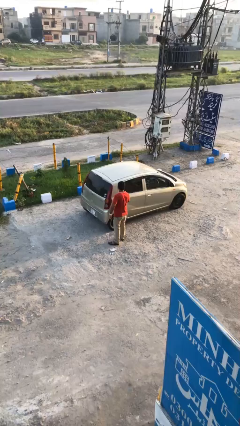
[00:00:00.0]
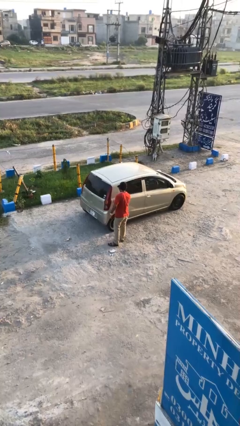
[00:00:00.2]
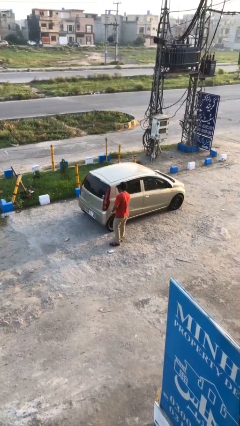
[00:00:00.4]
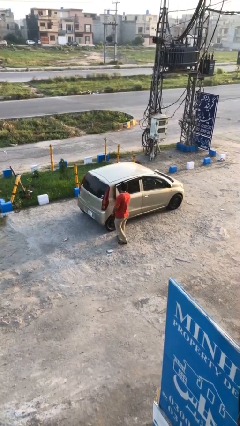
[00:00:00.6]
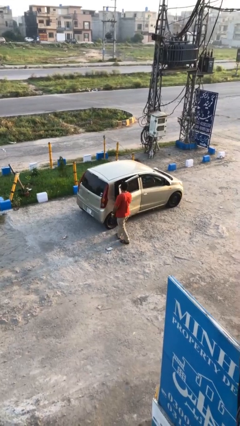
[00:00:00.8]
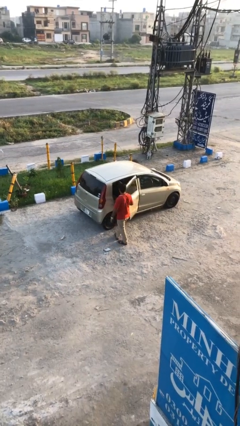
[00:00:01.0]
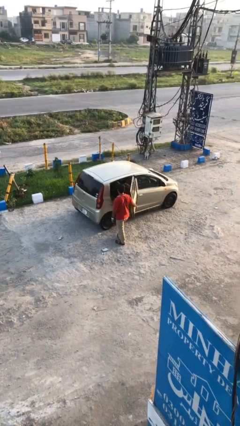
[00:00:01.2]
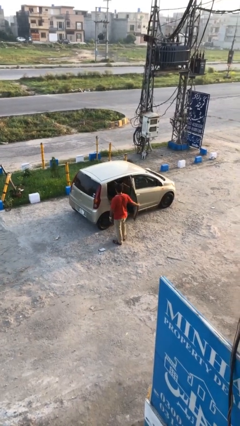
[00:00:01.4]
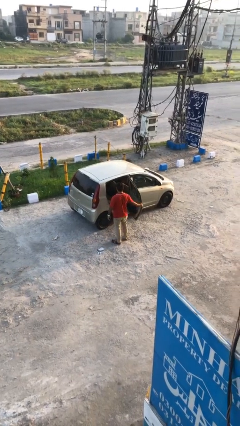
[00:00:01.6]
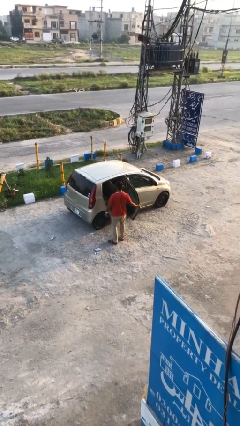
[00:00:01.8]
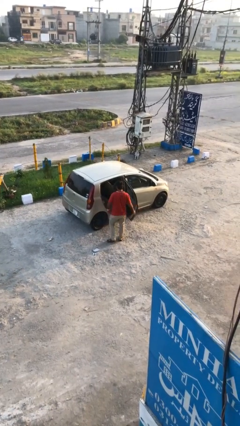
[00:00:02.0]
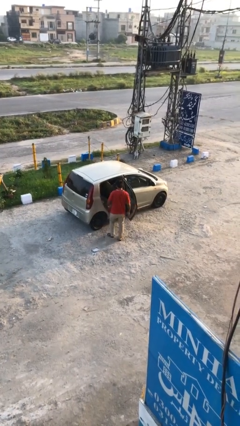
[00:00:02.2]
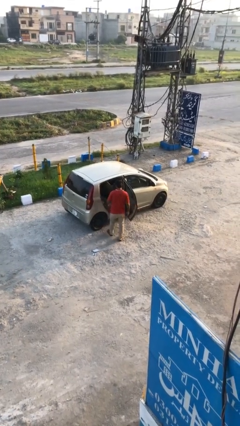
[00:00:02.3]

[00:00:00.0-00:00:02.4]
person opens car door

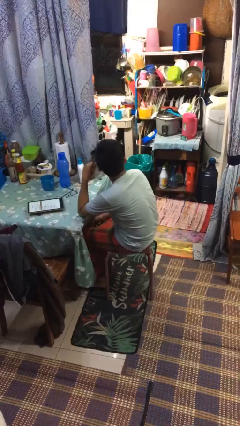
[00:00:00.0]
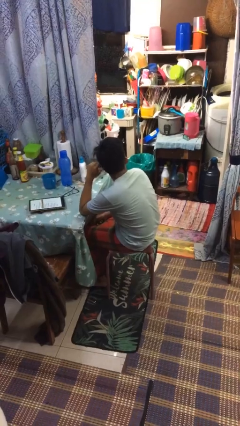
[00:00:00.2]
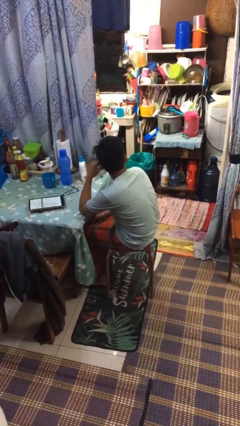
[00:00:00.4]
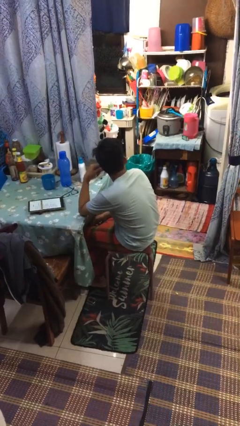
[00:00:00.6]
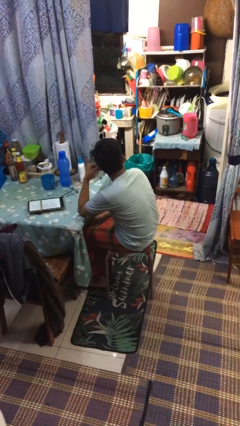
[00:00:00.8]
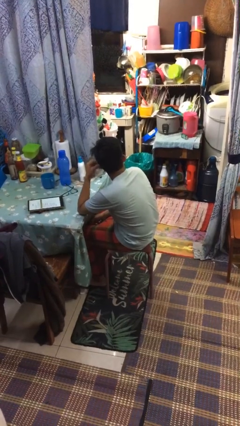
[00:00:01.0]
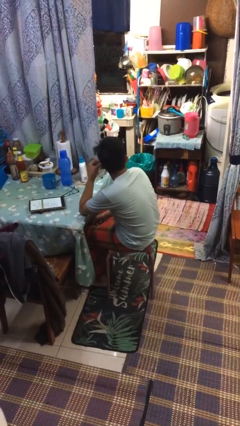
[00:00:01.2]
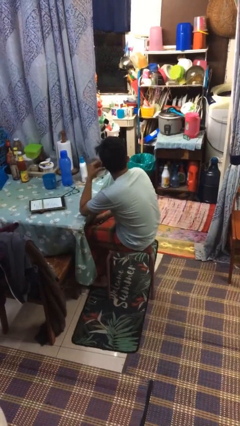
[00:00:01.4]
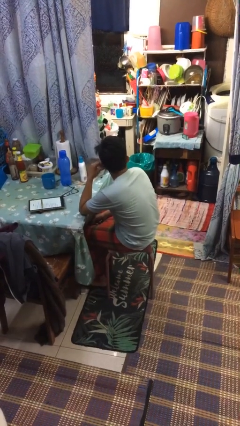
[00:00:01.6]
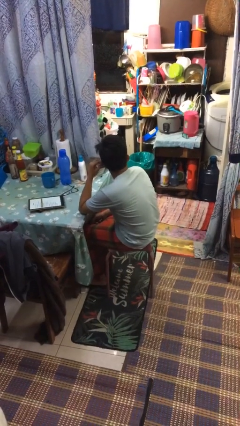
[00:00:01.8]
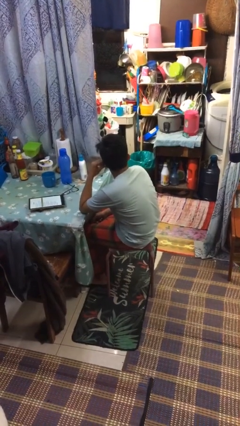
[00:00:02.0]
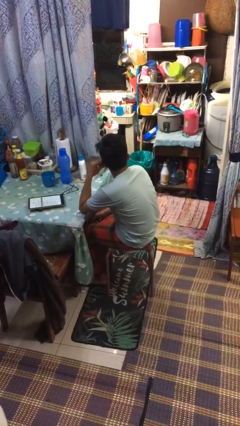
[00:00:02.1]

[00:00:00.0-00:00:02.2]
person touches earlobe

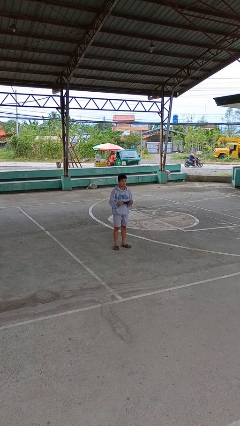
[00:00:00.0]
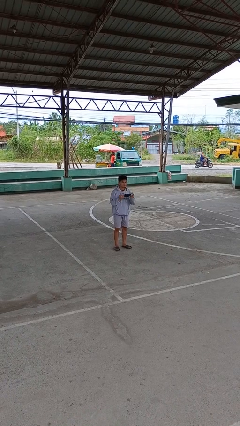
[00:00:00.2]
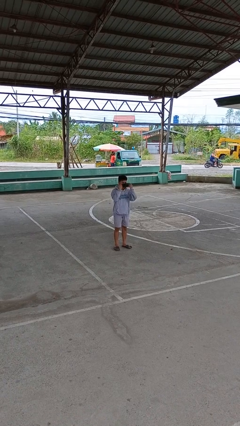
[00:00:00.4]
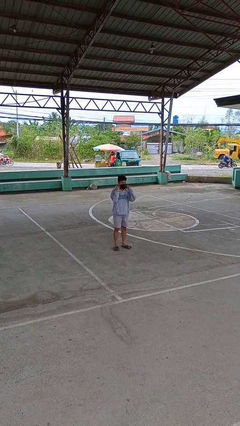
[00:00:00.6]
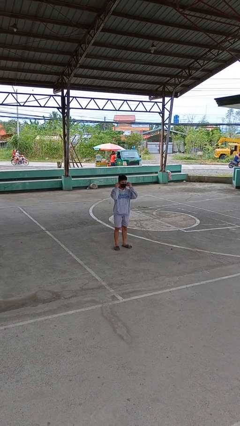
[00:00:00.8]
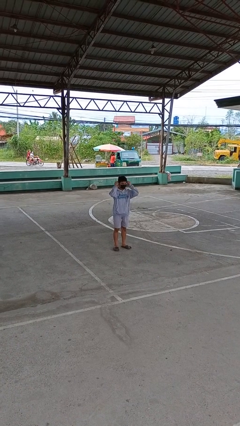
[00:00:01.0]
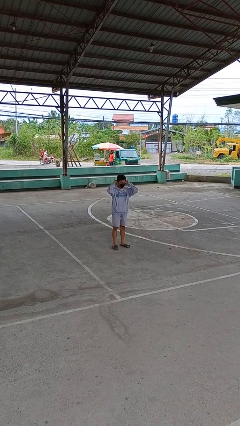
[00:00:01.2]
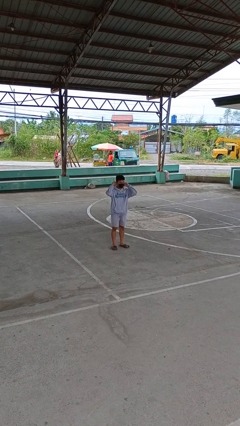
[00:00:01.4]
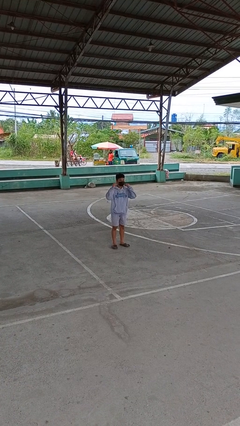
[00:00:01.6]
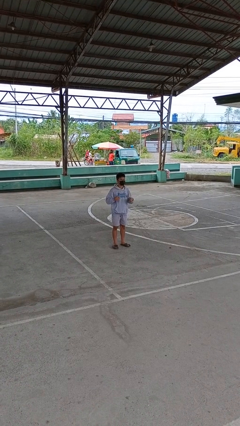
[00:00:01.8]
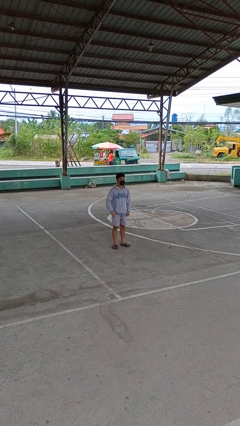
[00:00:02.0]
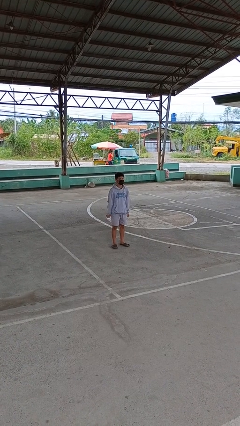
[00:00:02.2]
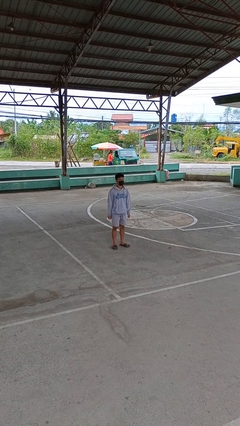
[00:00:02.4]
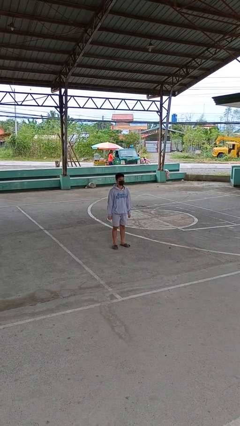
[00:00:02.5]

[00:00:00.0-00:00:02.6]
person puts on facemask

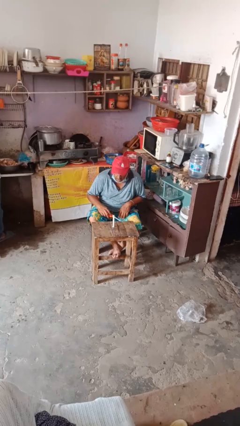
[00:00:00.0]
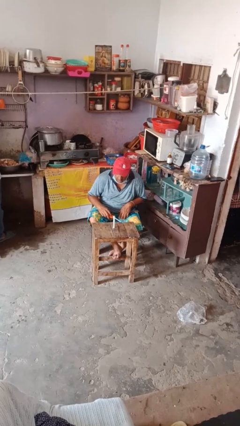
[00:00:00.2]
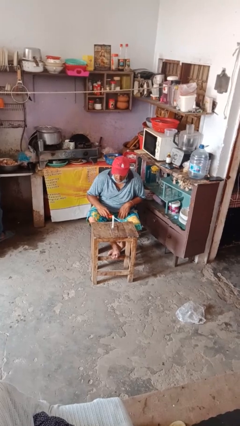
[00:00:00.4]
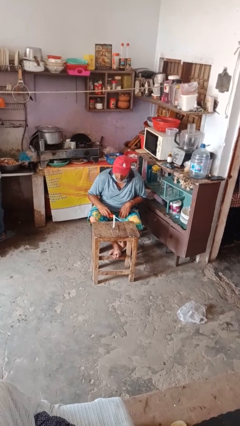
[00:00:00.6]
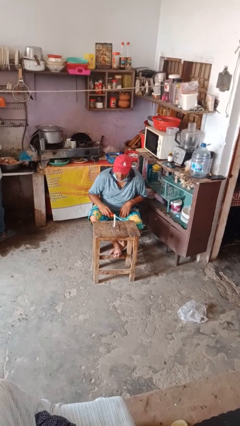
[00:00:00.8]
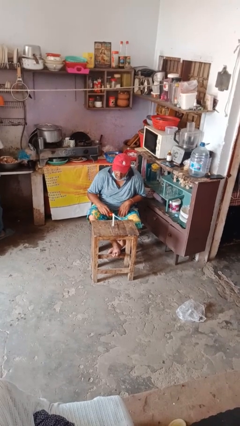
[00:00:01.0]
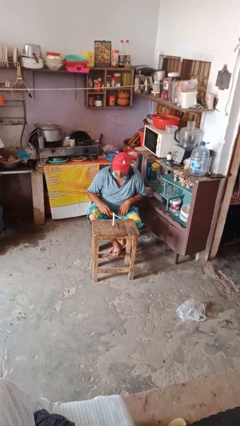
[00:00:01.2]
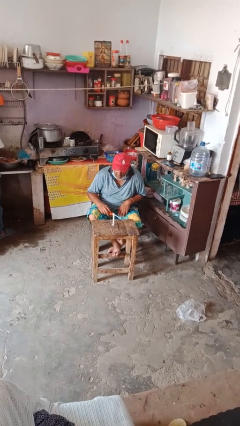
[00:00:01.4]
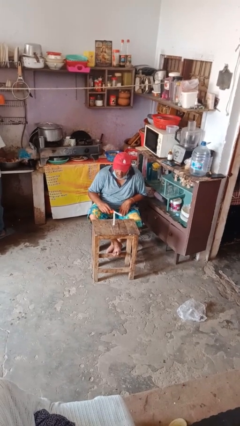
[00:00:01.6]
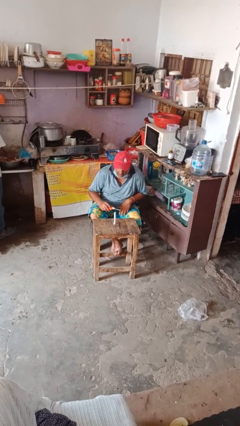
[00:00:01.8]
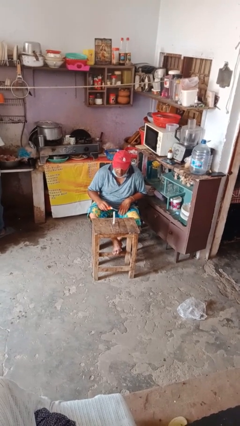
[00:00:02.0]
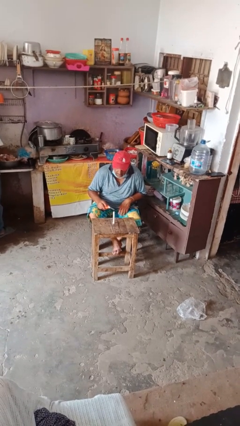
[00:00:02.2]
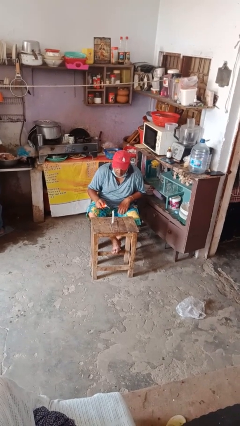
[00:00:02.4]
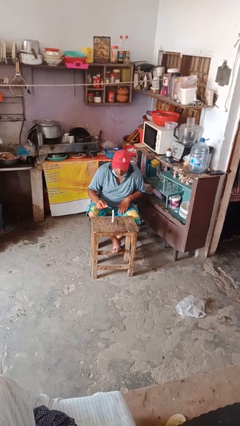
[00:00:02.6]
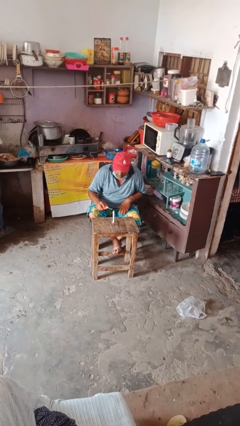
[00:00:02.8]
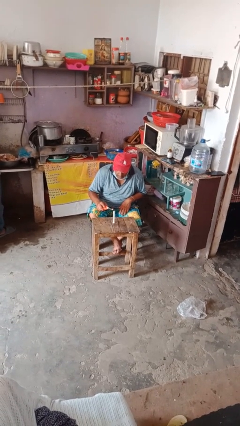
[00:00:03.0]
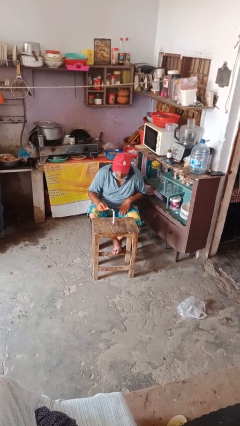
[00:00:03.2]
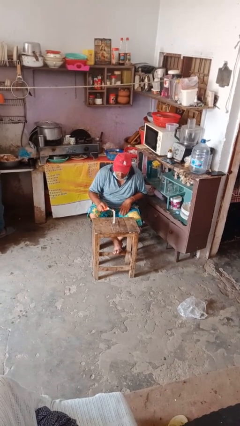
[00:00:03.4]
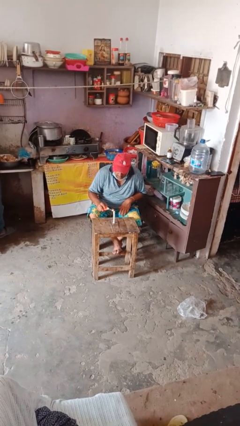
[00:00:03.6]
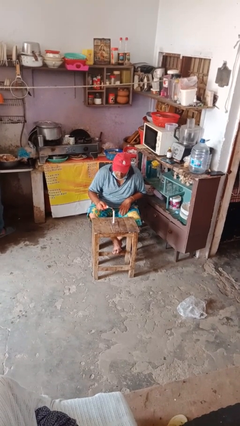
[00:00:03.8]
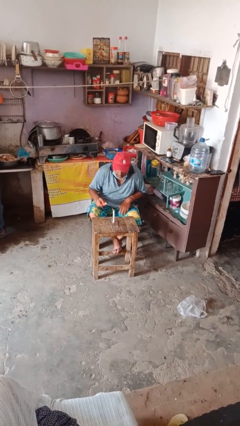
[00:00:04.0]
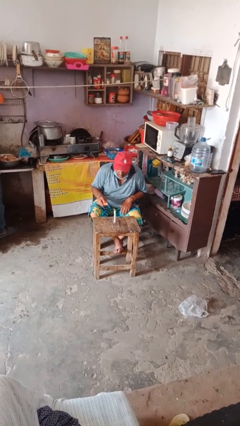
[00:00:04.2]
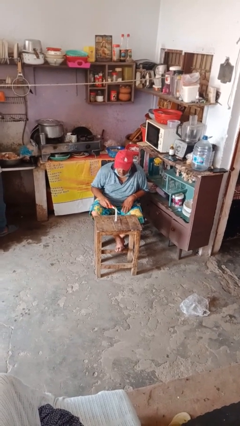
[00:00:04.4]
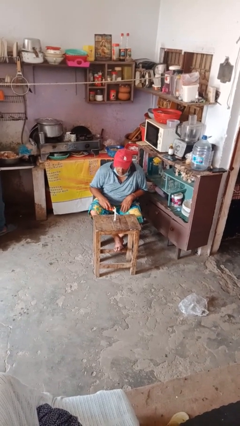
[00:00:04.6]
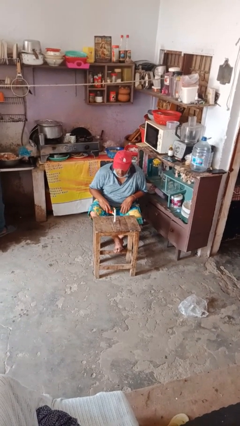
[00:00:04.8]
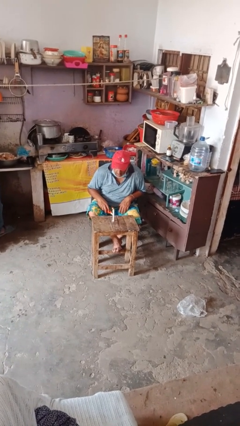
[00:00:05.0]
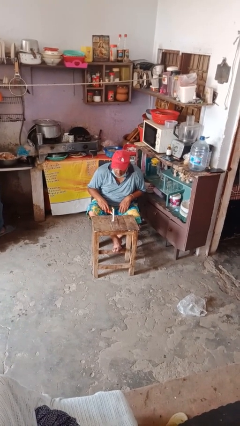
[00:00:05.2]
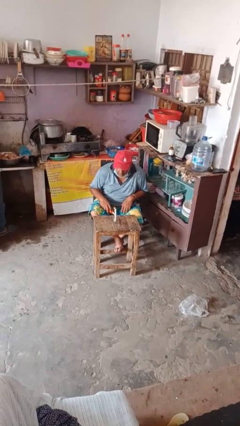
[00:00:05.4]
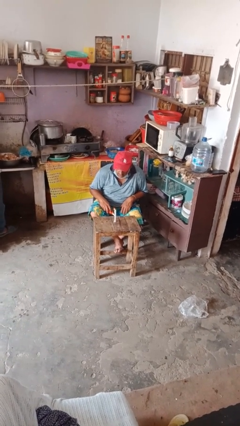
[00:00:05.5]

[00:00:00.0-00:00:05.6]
person lights candle

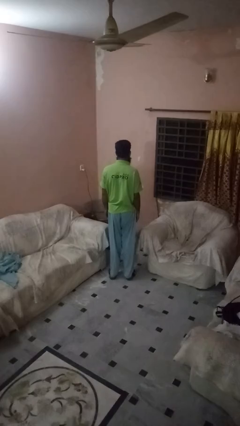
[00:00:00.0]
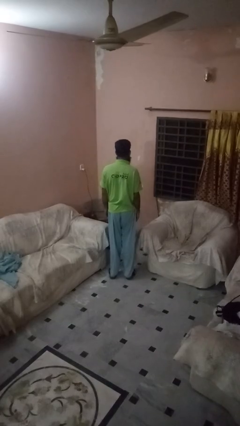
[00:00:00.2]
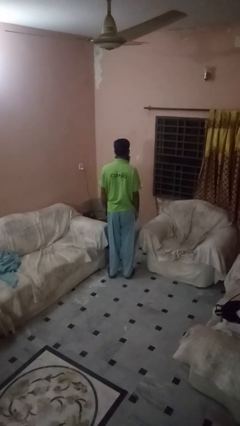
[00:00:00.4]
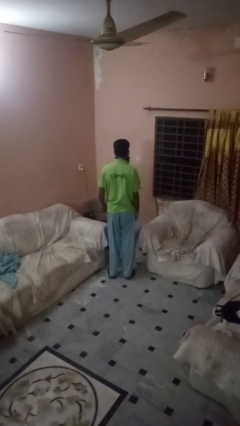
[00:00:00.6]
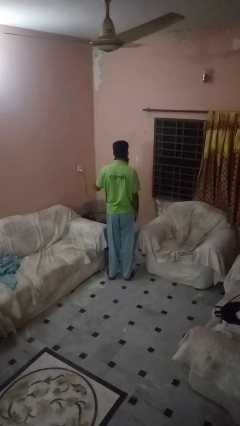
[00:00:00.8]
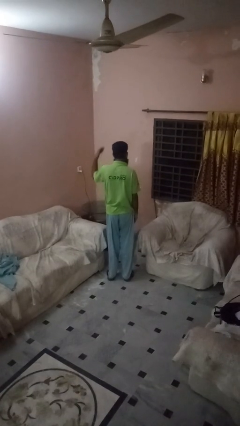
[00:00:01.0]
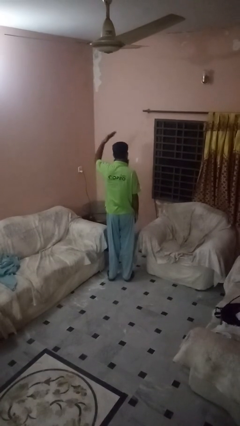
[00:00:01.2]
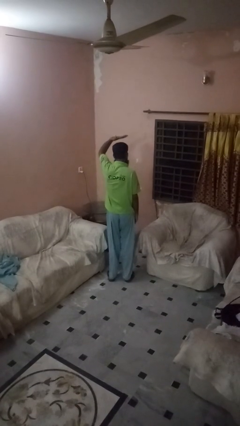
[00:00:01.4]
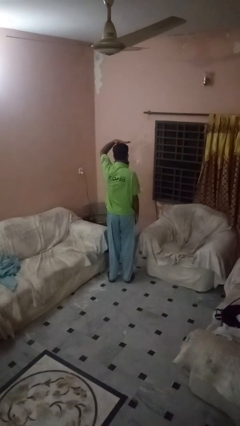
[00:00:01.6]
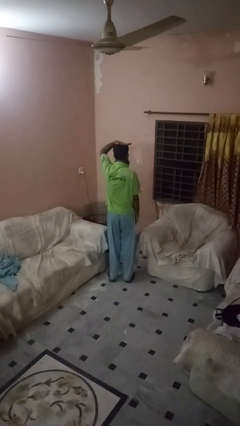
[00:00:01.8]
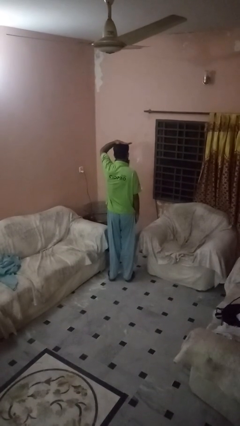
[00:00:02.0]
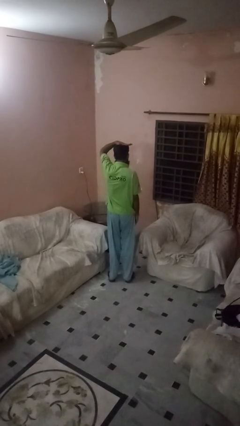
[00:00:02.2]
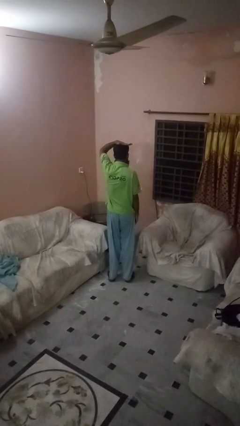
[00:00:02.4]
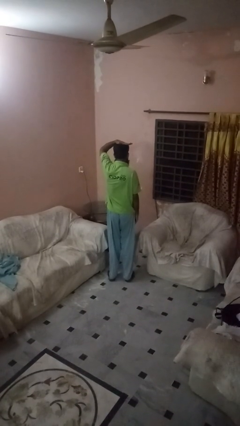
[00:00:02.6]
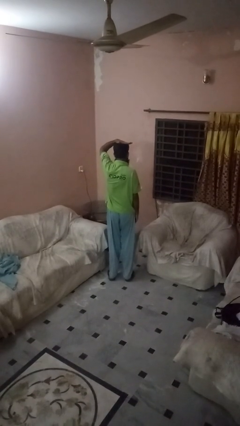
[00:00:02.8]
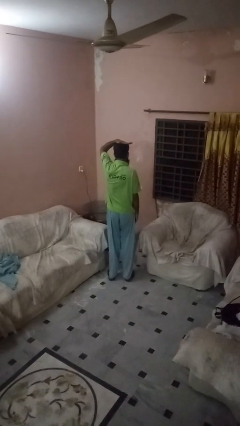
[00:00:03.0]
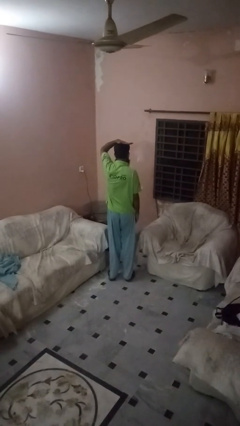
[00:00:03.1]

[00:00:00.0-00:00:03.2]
person pats head

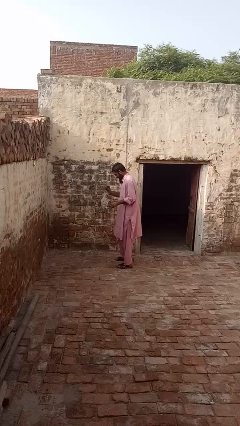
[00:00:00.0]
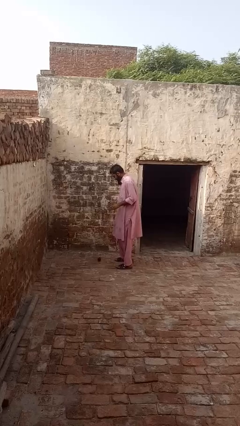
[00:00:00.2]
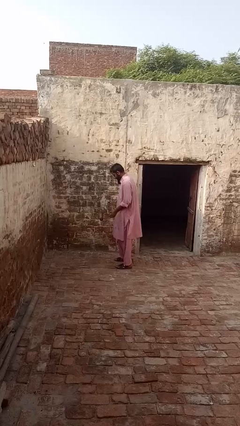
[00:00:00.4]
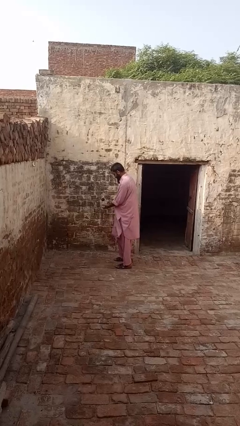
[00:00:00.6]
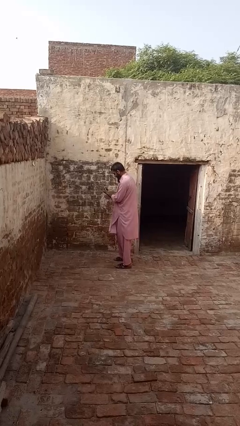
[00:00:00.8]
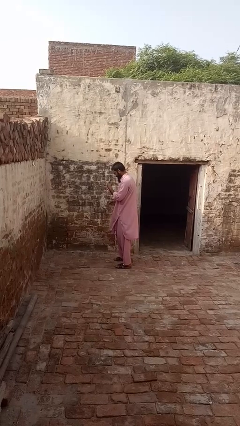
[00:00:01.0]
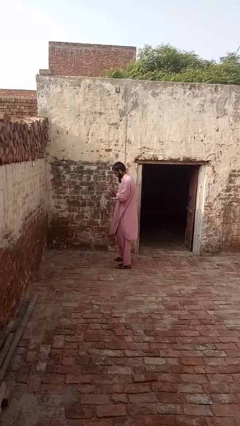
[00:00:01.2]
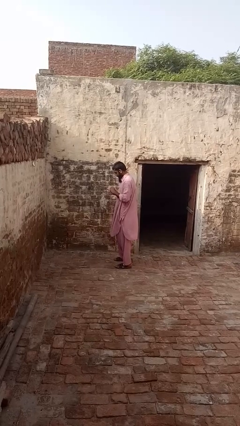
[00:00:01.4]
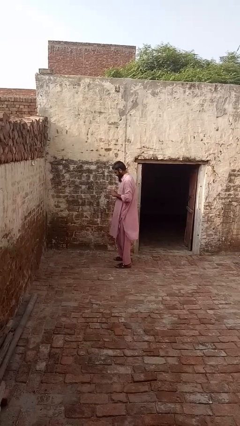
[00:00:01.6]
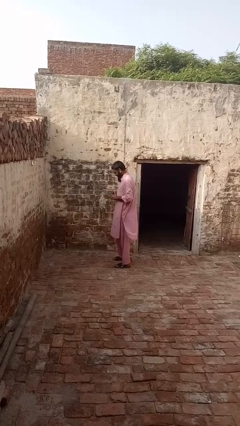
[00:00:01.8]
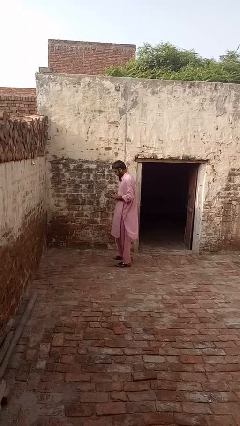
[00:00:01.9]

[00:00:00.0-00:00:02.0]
person bounces ball on floor
